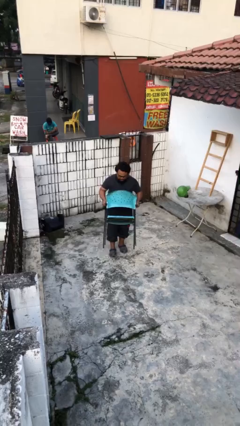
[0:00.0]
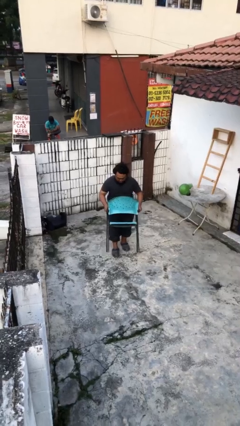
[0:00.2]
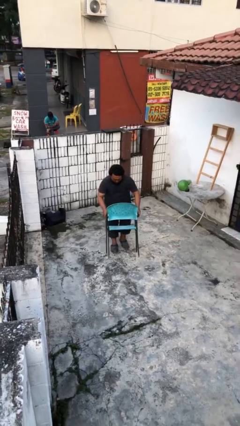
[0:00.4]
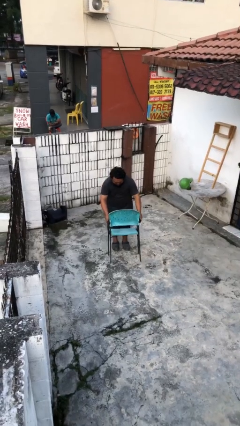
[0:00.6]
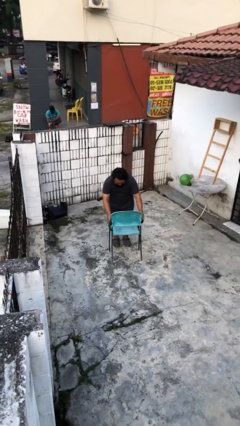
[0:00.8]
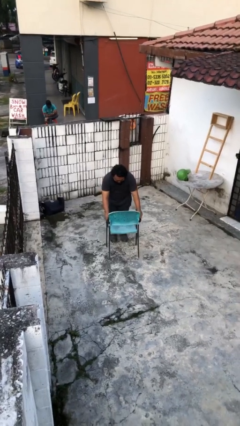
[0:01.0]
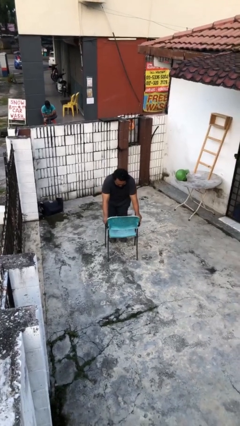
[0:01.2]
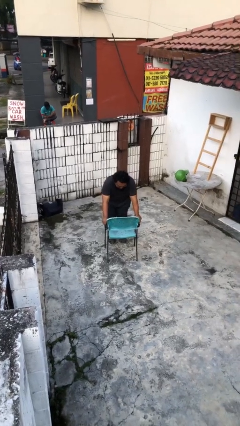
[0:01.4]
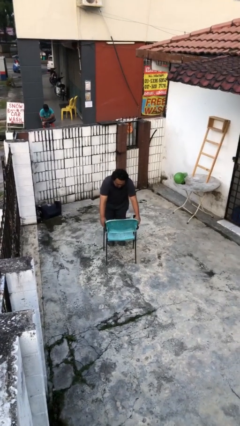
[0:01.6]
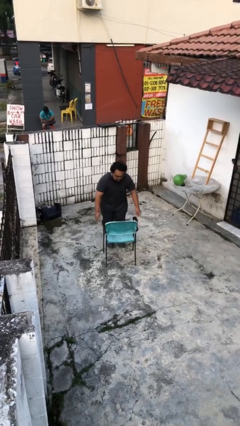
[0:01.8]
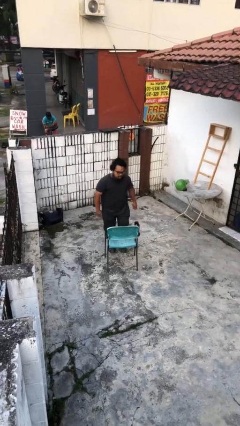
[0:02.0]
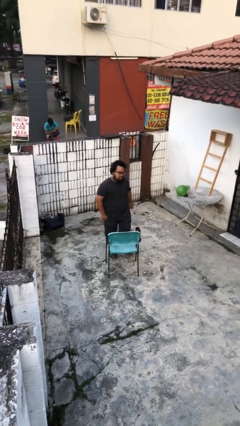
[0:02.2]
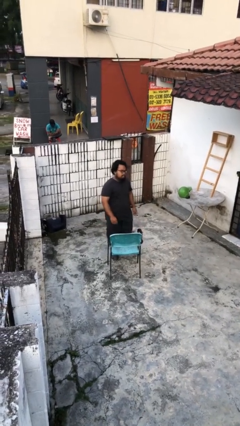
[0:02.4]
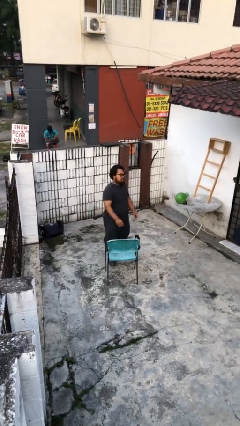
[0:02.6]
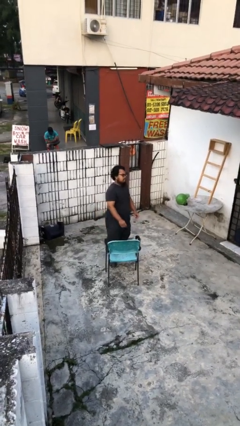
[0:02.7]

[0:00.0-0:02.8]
person puts down object on floor

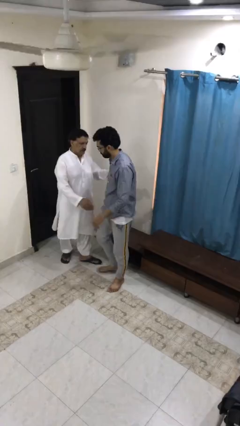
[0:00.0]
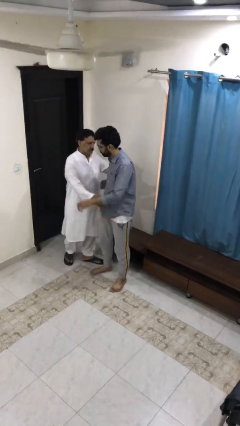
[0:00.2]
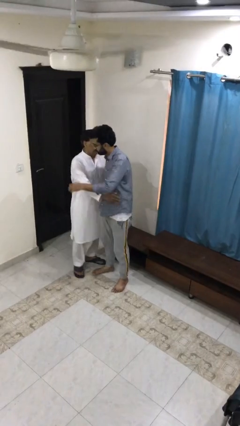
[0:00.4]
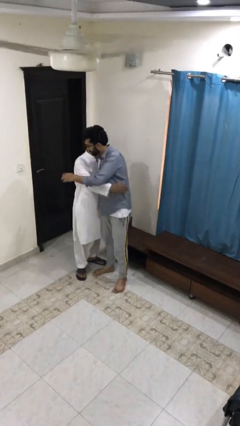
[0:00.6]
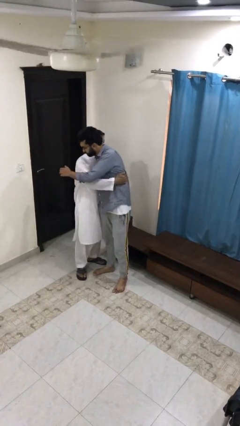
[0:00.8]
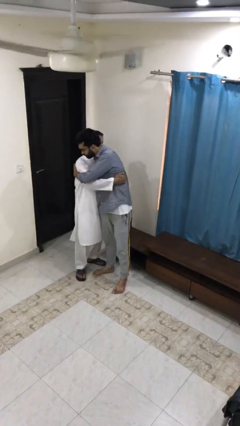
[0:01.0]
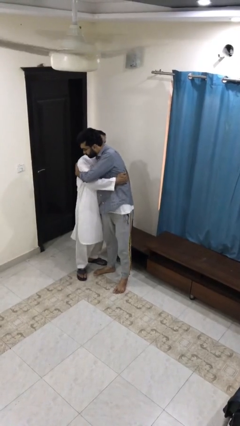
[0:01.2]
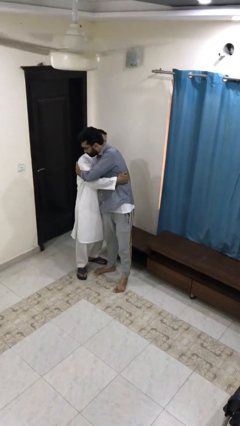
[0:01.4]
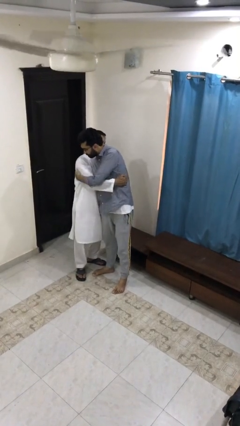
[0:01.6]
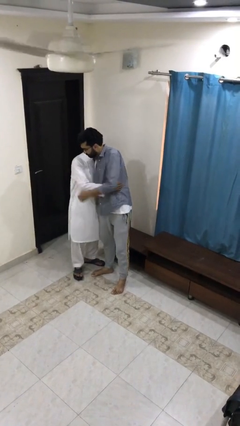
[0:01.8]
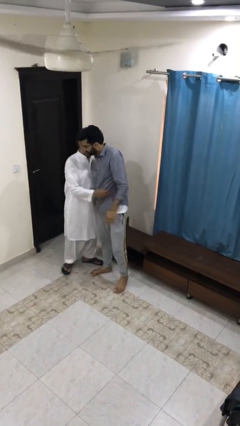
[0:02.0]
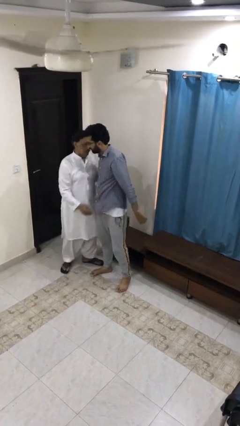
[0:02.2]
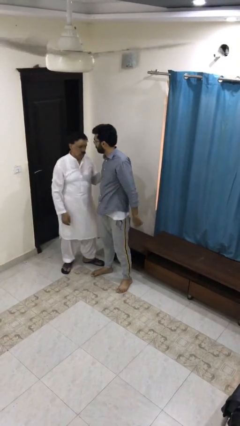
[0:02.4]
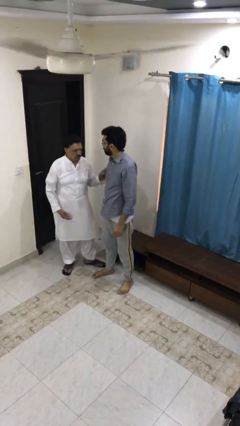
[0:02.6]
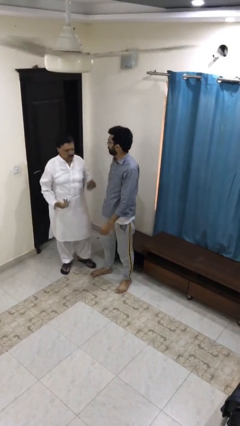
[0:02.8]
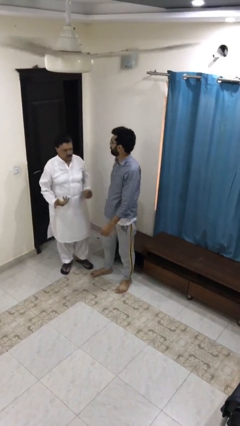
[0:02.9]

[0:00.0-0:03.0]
person embraces person

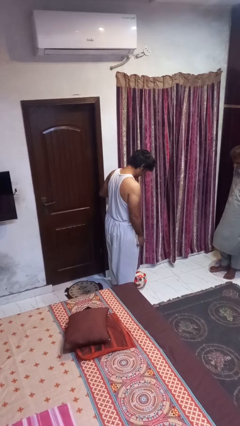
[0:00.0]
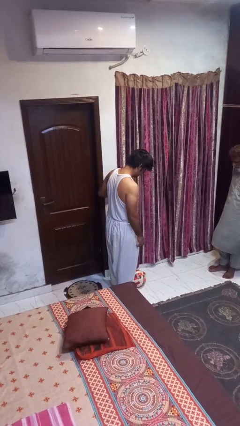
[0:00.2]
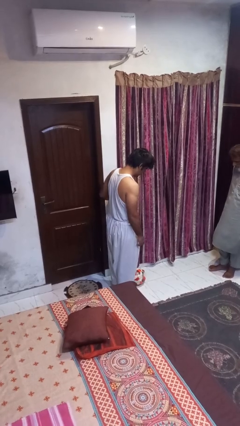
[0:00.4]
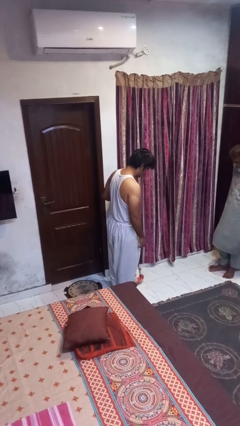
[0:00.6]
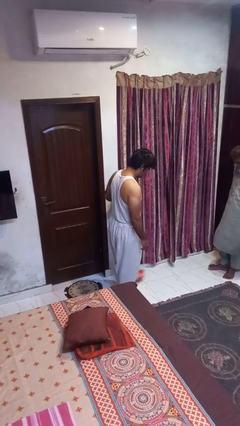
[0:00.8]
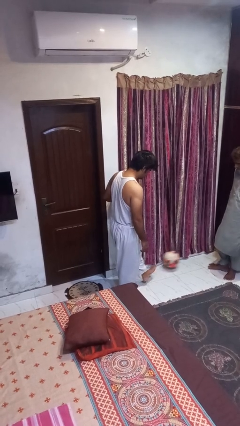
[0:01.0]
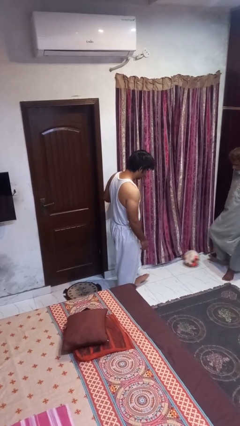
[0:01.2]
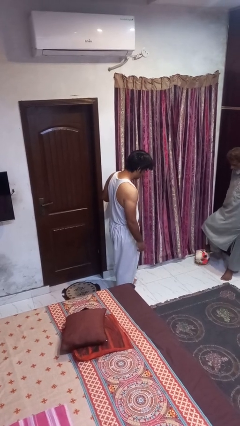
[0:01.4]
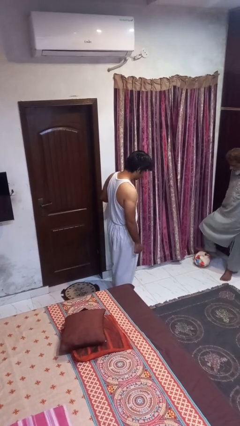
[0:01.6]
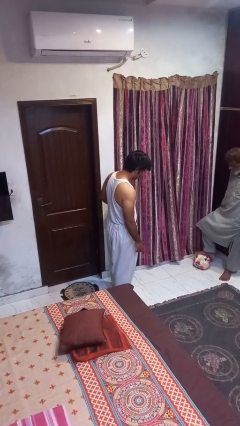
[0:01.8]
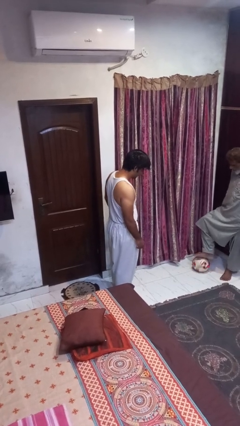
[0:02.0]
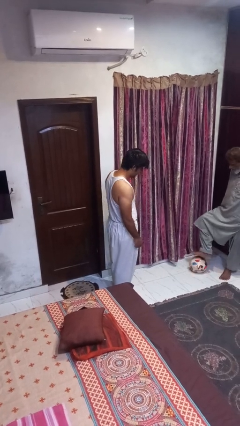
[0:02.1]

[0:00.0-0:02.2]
person kicks object to person

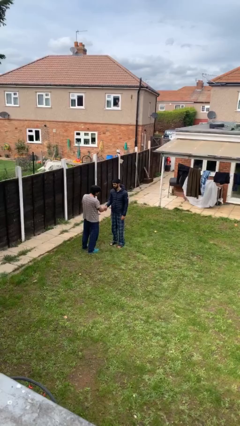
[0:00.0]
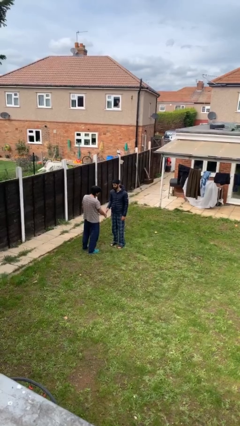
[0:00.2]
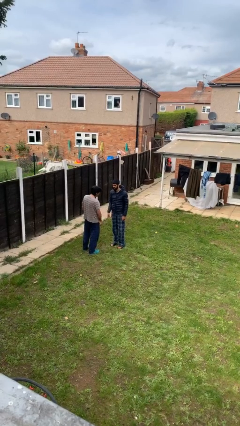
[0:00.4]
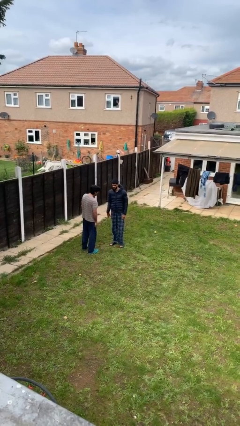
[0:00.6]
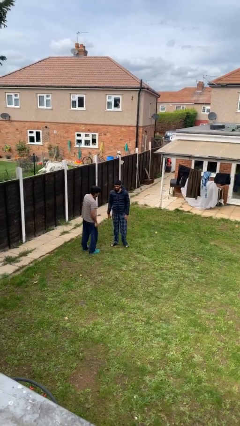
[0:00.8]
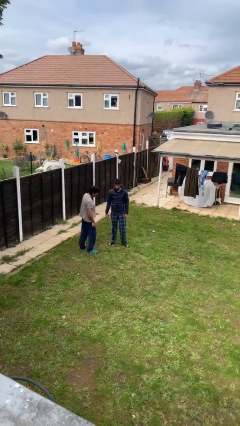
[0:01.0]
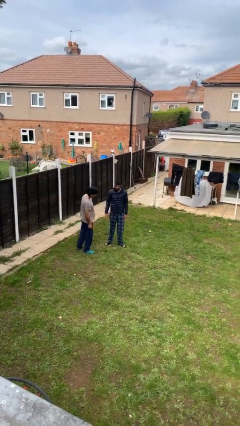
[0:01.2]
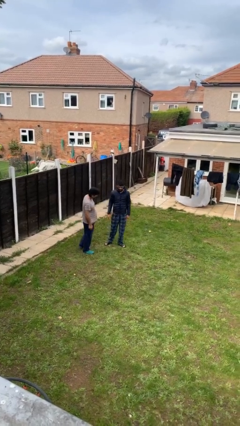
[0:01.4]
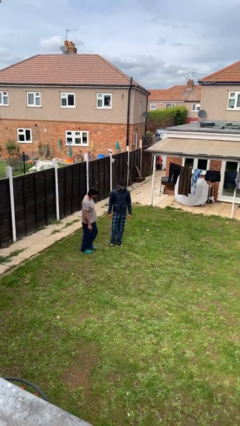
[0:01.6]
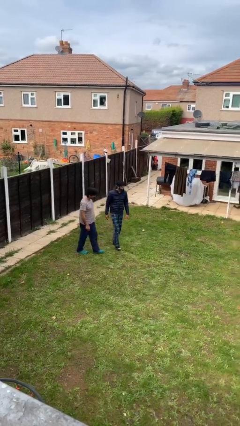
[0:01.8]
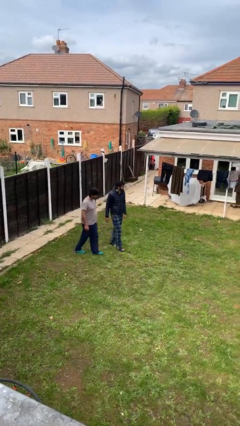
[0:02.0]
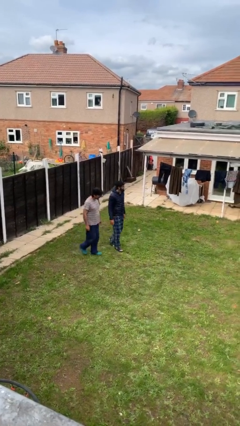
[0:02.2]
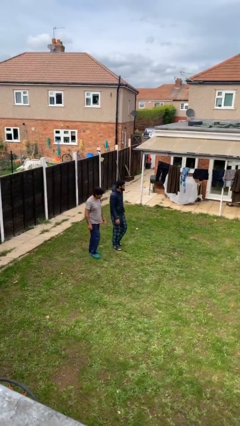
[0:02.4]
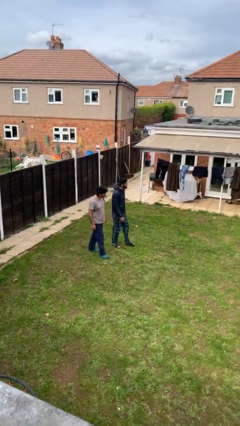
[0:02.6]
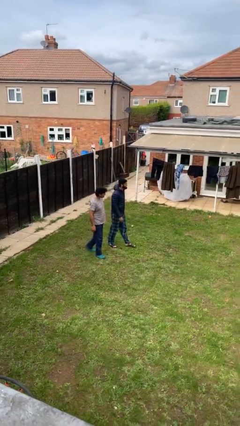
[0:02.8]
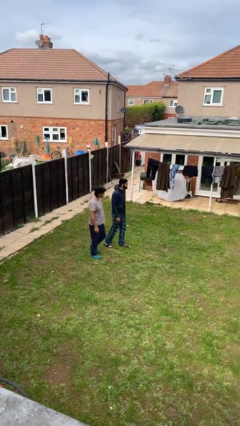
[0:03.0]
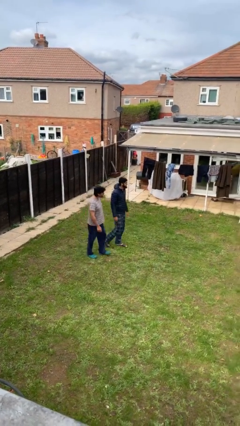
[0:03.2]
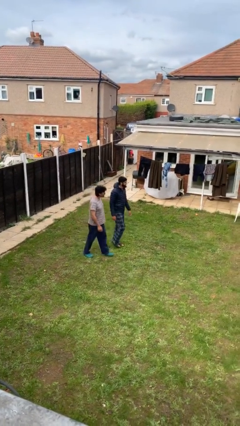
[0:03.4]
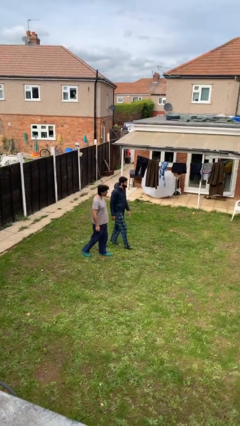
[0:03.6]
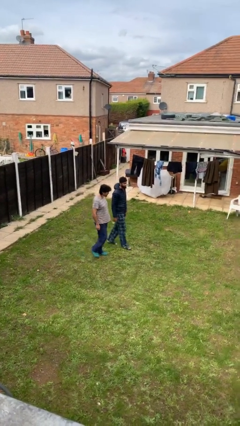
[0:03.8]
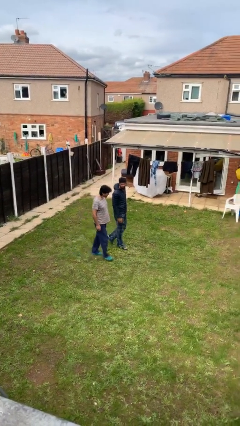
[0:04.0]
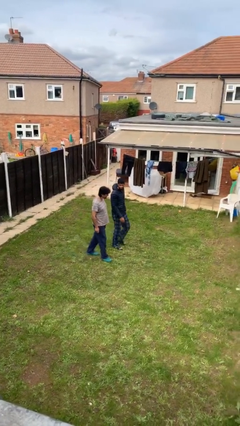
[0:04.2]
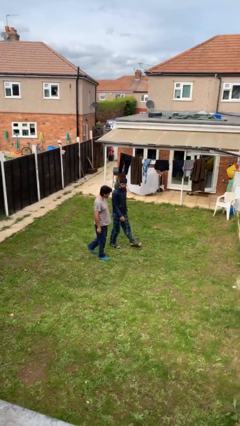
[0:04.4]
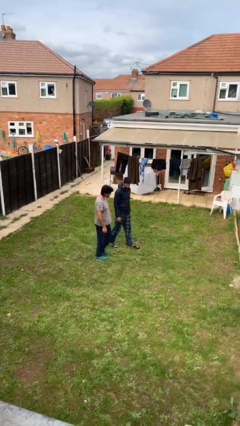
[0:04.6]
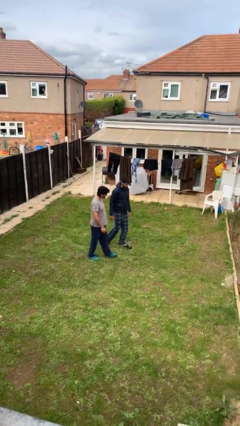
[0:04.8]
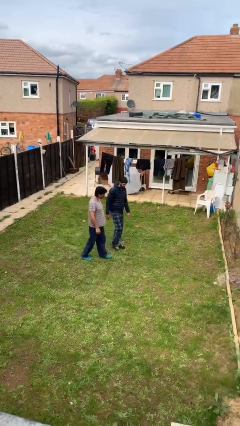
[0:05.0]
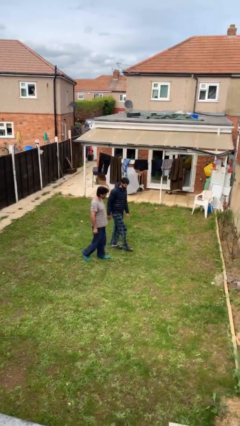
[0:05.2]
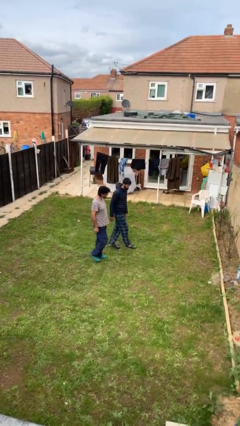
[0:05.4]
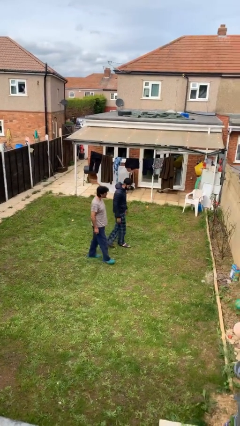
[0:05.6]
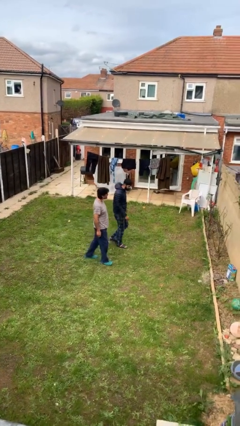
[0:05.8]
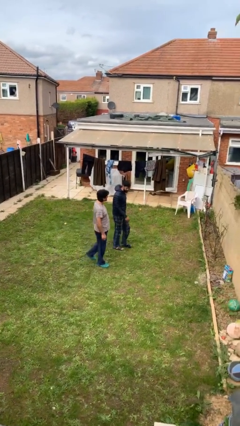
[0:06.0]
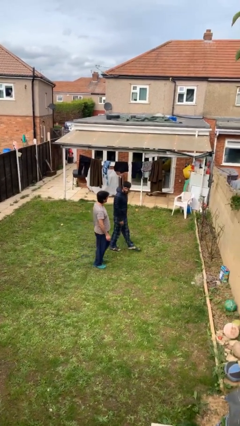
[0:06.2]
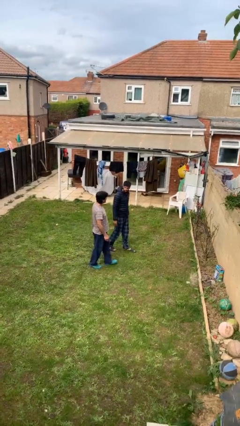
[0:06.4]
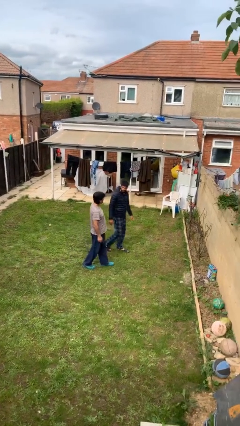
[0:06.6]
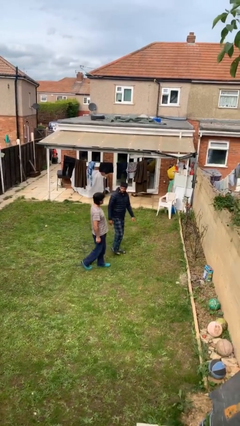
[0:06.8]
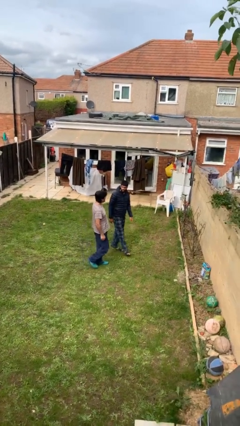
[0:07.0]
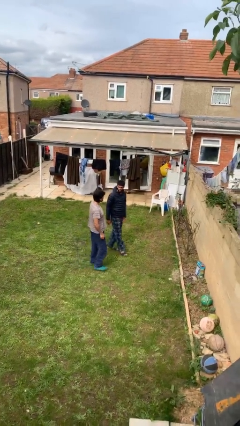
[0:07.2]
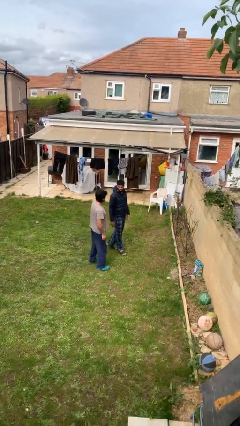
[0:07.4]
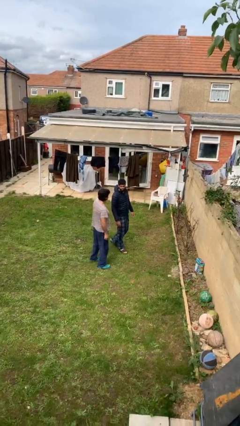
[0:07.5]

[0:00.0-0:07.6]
person talks to person

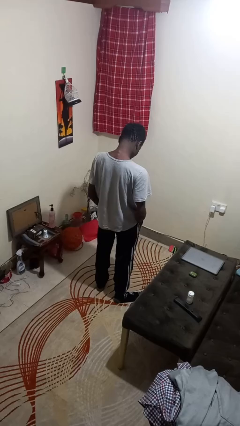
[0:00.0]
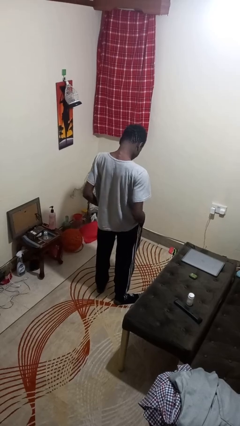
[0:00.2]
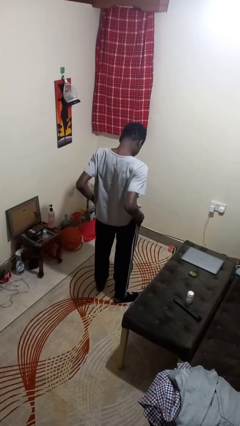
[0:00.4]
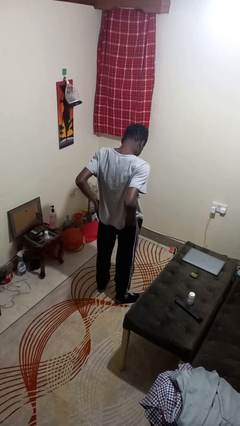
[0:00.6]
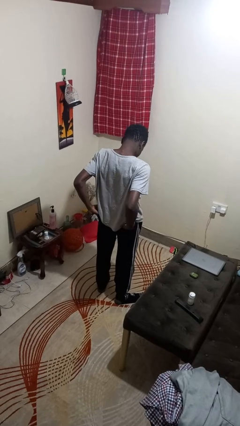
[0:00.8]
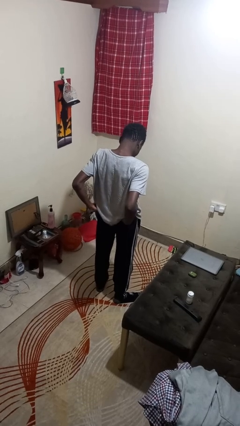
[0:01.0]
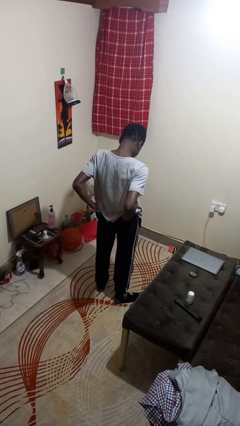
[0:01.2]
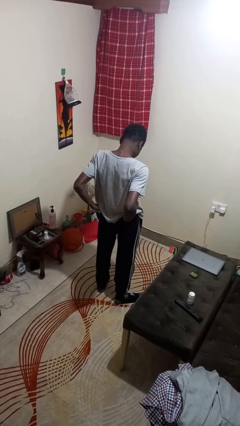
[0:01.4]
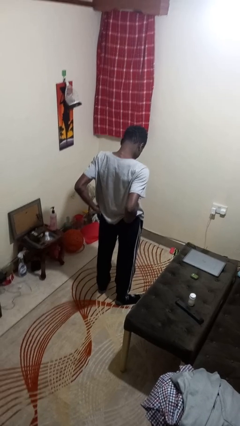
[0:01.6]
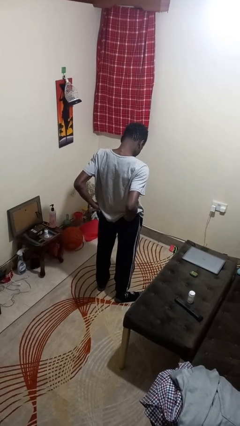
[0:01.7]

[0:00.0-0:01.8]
person puts hands in back pockets
